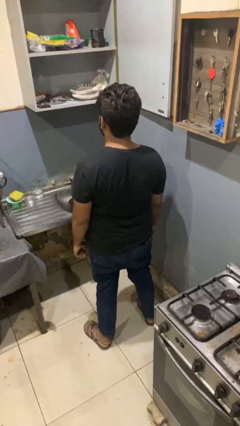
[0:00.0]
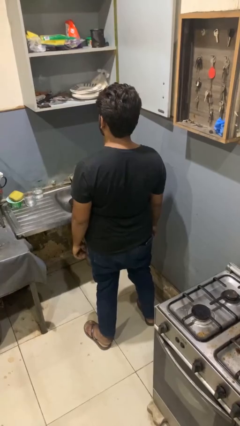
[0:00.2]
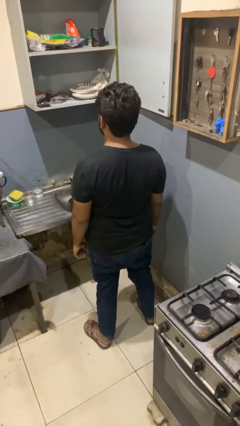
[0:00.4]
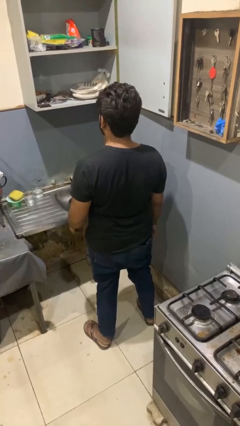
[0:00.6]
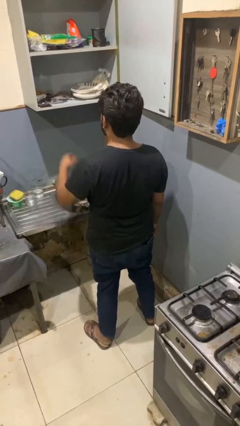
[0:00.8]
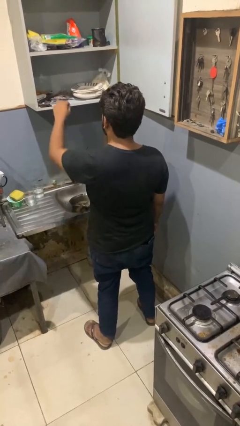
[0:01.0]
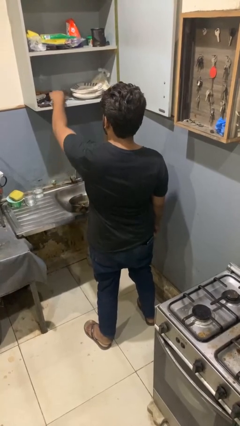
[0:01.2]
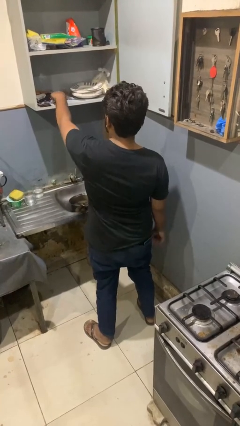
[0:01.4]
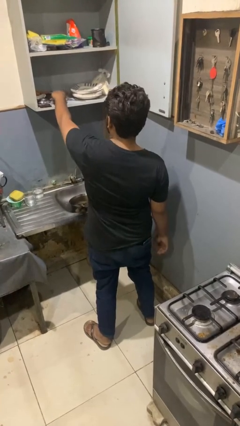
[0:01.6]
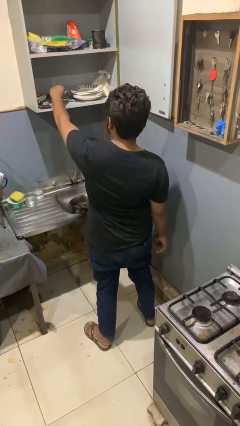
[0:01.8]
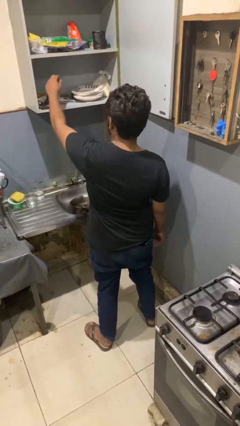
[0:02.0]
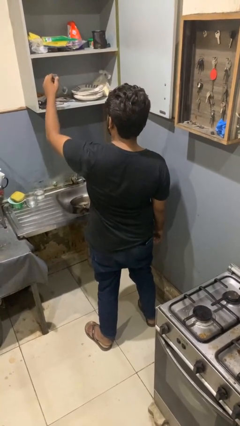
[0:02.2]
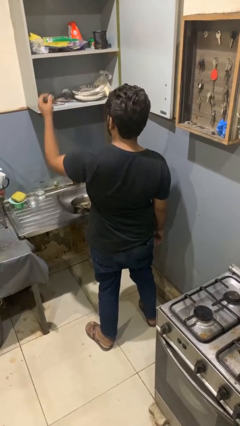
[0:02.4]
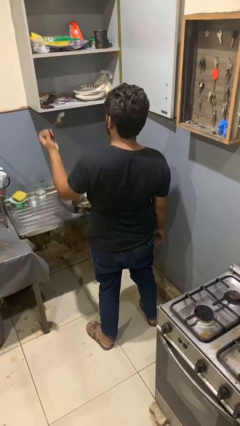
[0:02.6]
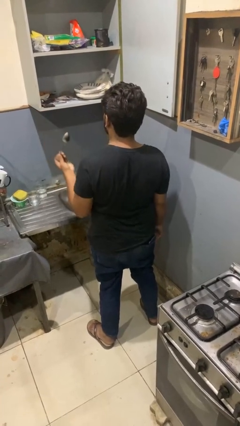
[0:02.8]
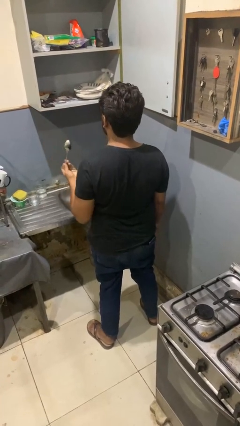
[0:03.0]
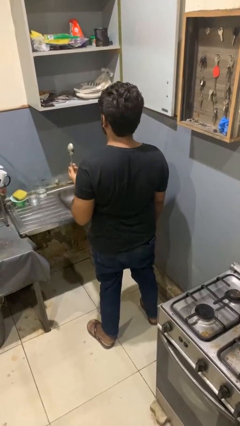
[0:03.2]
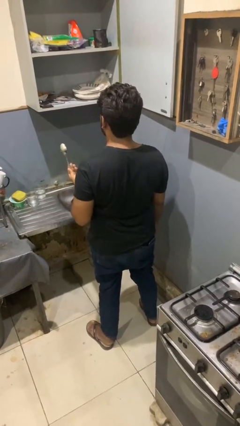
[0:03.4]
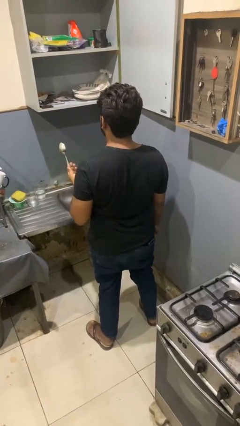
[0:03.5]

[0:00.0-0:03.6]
person takes object from kitchen drawer

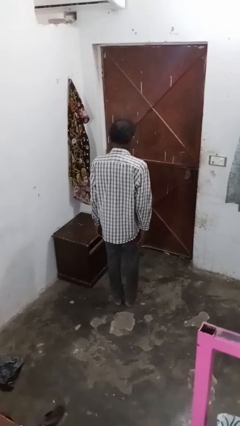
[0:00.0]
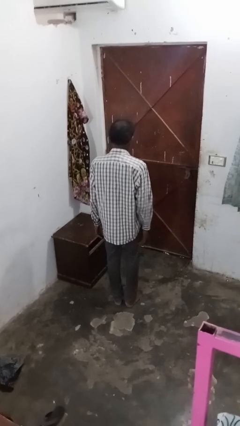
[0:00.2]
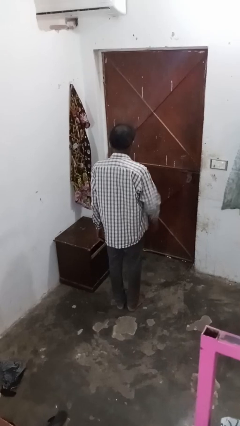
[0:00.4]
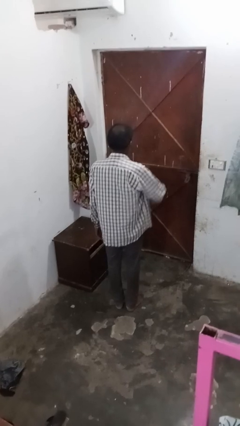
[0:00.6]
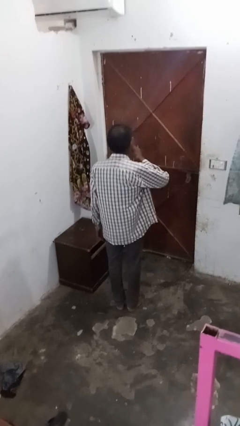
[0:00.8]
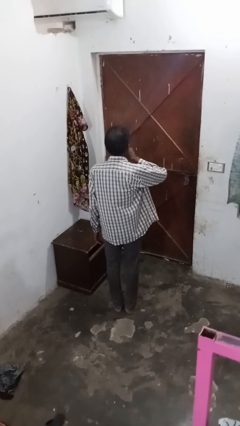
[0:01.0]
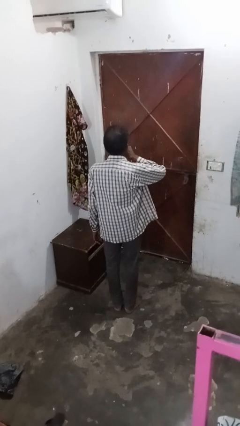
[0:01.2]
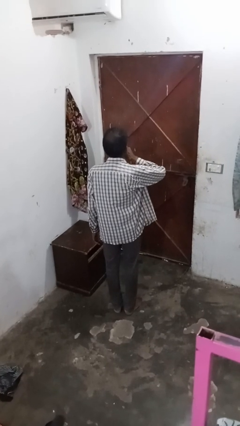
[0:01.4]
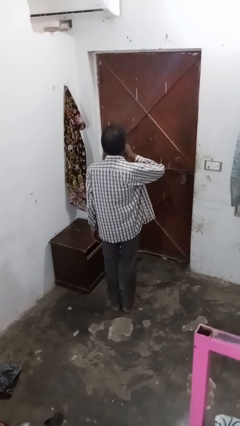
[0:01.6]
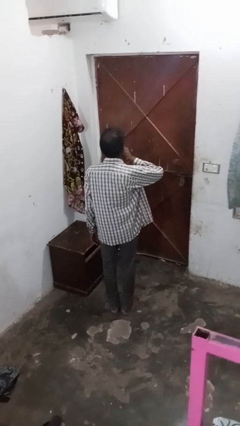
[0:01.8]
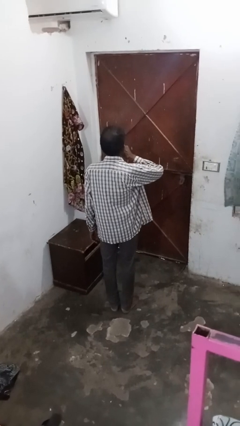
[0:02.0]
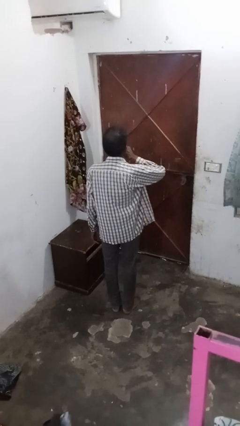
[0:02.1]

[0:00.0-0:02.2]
person gestures be quiet

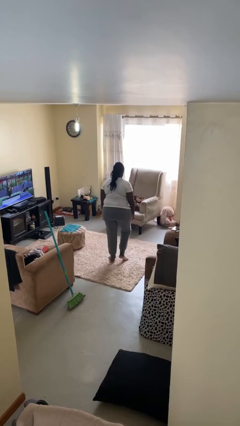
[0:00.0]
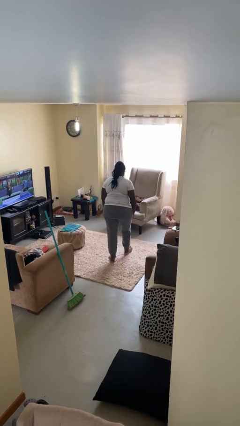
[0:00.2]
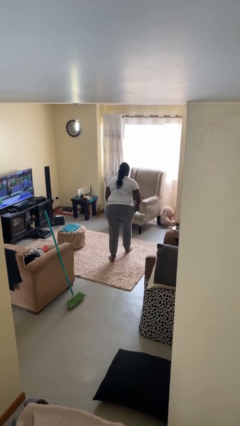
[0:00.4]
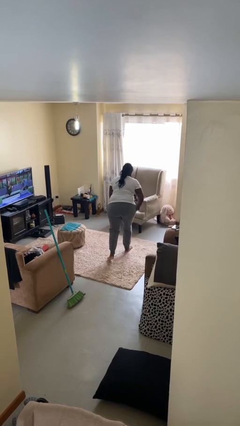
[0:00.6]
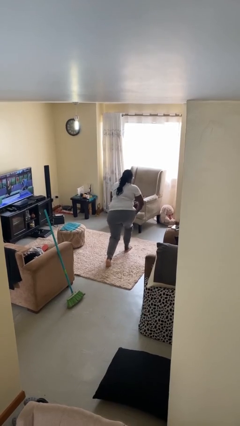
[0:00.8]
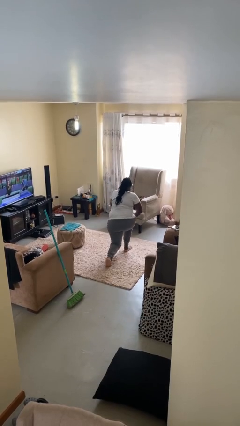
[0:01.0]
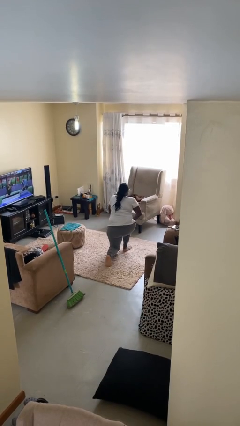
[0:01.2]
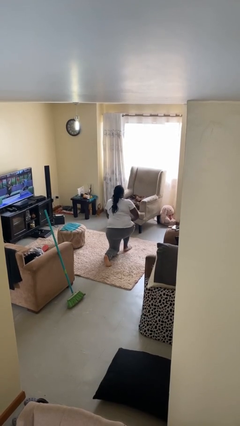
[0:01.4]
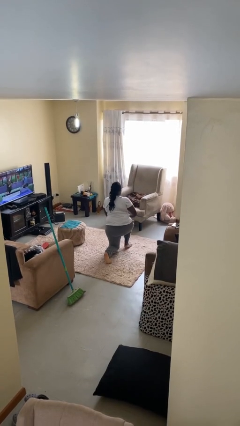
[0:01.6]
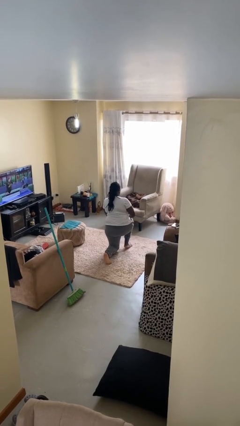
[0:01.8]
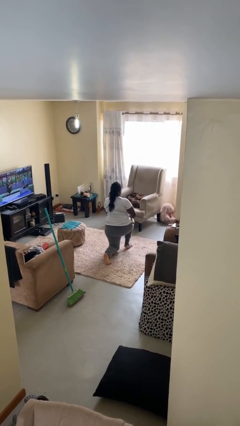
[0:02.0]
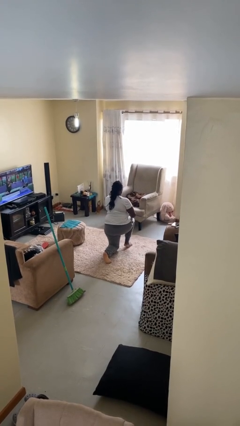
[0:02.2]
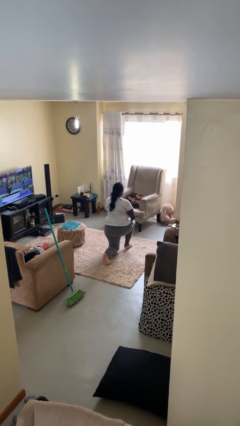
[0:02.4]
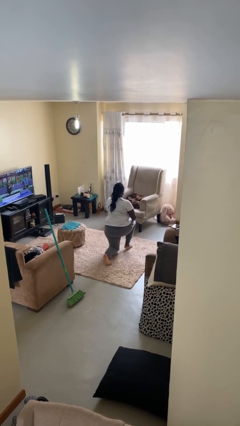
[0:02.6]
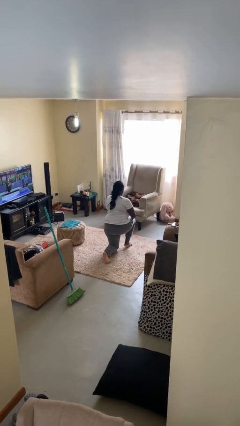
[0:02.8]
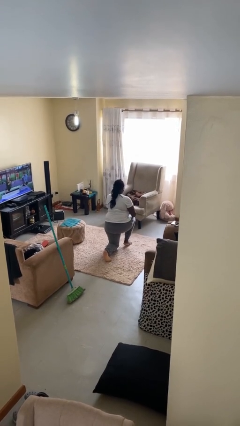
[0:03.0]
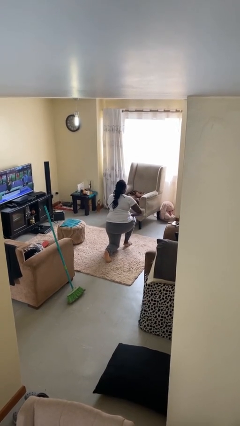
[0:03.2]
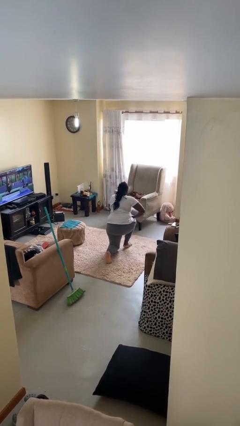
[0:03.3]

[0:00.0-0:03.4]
person kneels

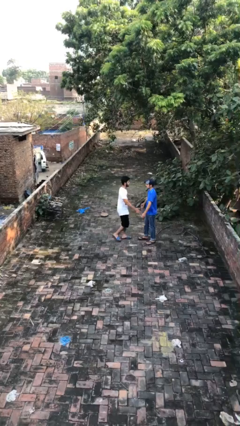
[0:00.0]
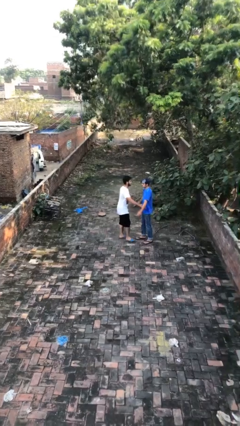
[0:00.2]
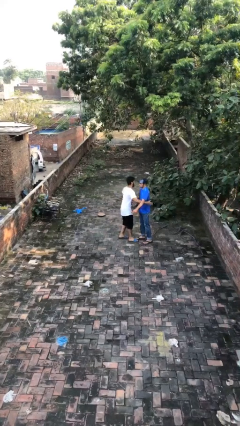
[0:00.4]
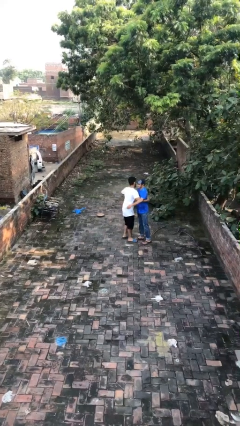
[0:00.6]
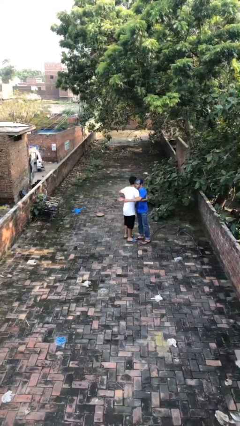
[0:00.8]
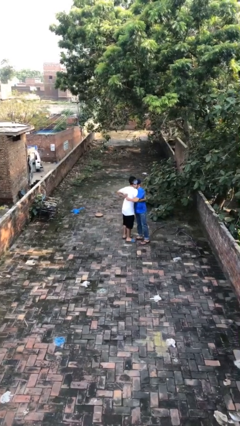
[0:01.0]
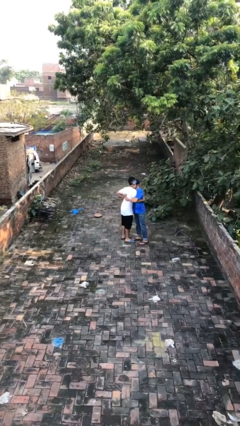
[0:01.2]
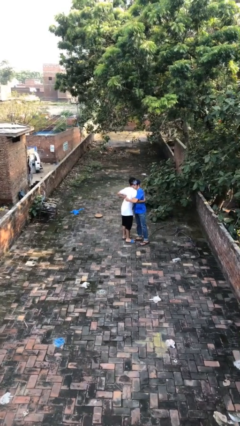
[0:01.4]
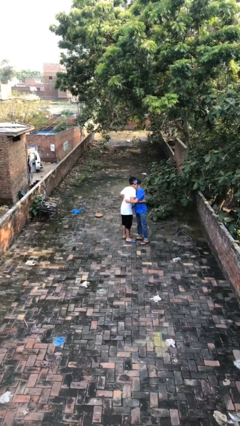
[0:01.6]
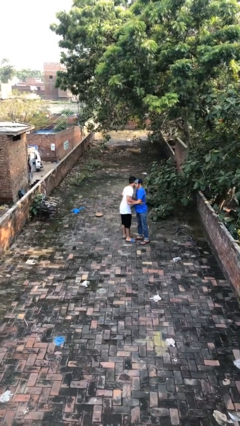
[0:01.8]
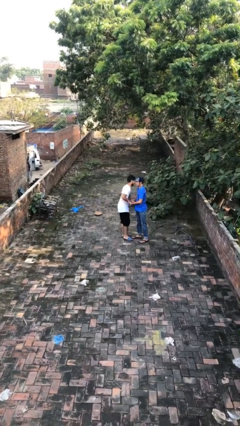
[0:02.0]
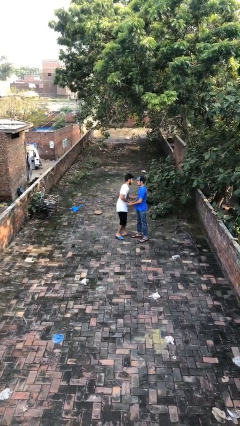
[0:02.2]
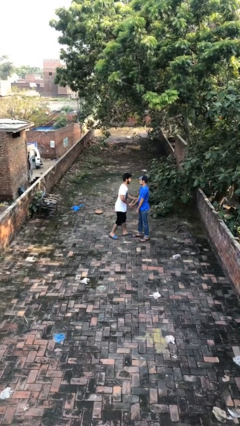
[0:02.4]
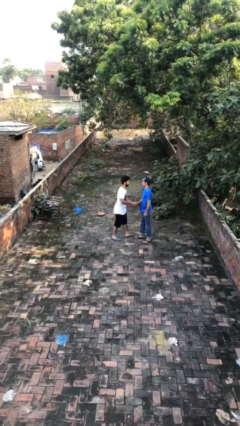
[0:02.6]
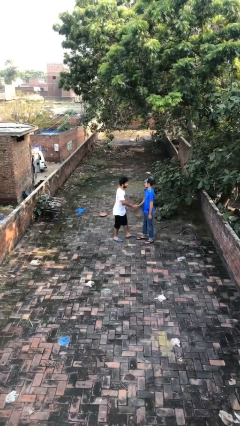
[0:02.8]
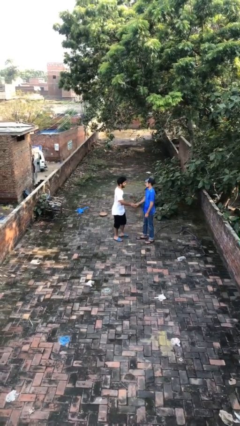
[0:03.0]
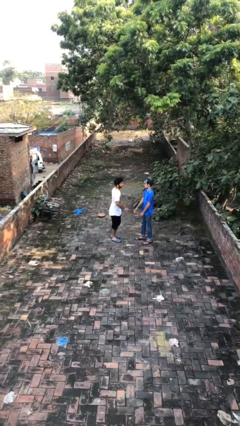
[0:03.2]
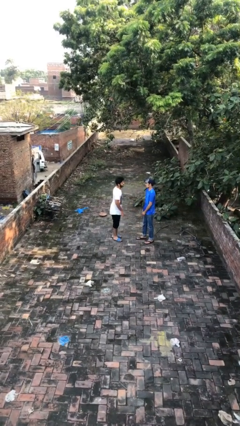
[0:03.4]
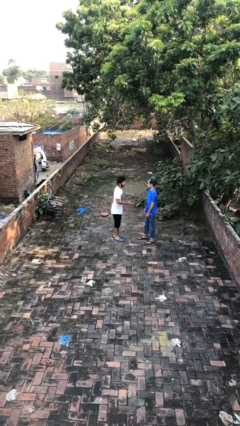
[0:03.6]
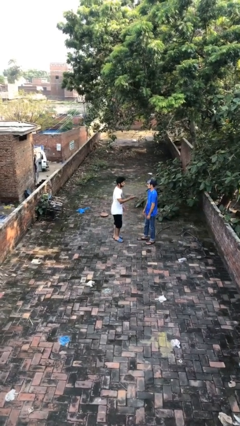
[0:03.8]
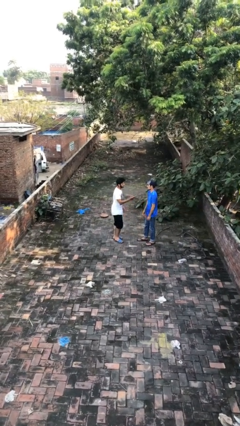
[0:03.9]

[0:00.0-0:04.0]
person embraces person

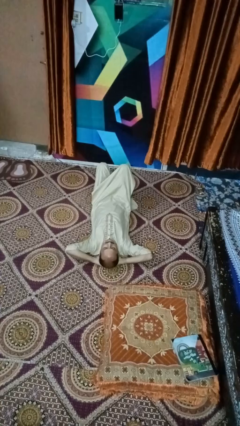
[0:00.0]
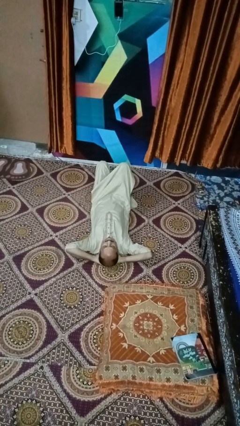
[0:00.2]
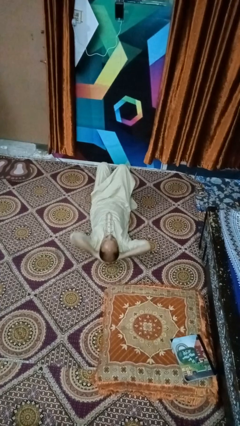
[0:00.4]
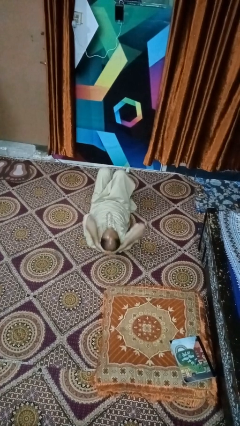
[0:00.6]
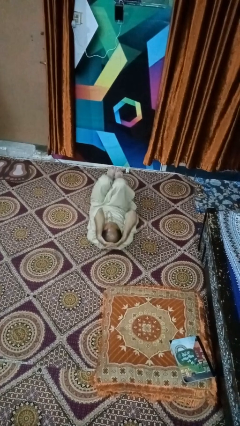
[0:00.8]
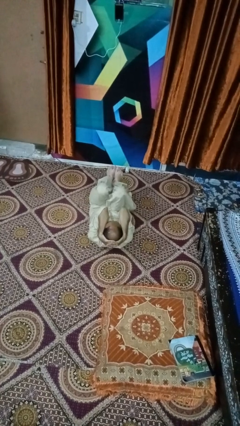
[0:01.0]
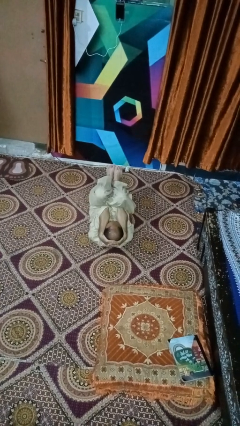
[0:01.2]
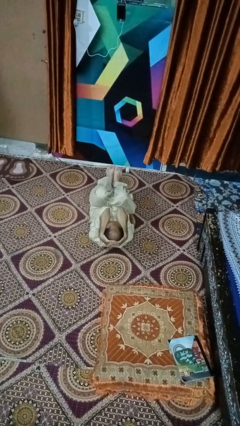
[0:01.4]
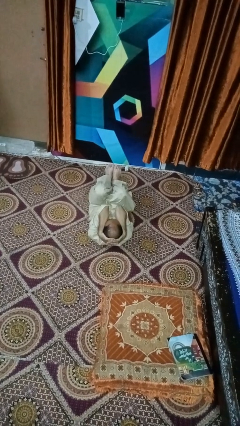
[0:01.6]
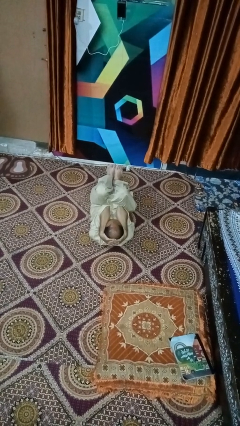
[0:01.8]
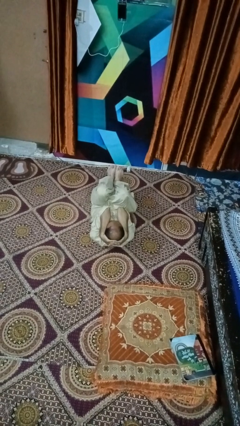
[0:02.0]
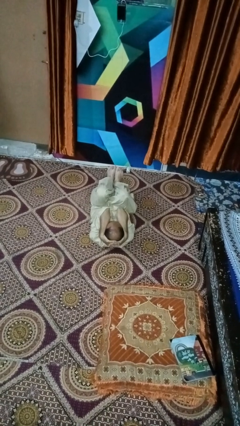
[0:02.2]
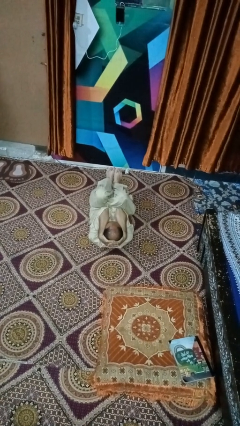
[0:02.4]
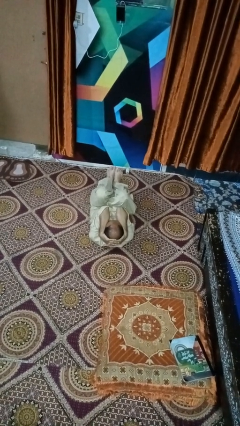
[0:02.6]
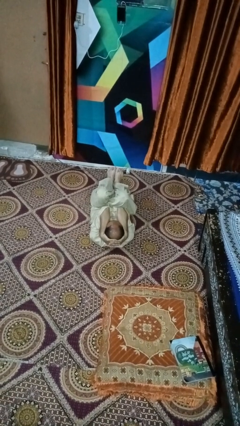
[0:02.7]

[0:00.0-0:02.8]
person exercises with situp

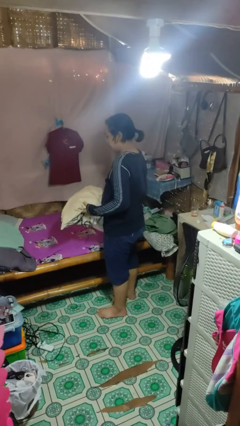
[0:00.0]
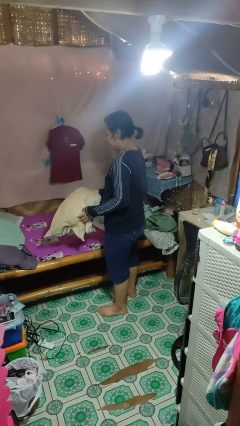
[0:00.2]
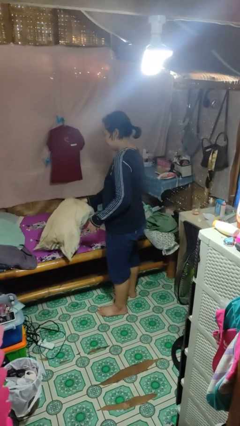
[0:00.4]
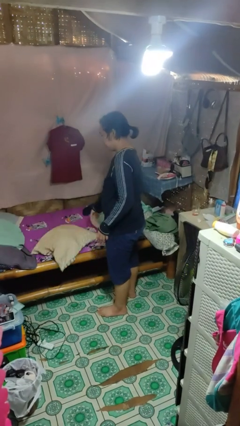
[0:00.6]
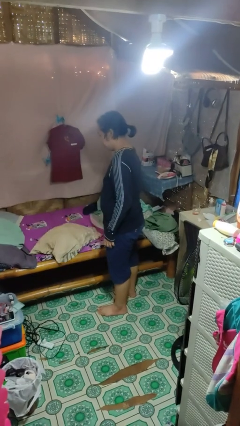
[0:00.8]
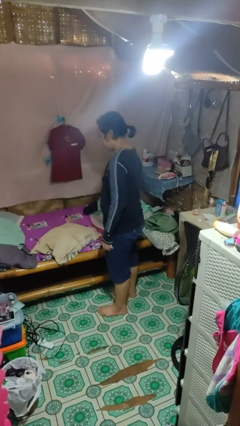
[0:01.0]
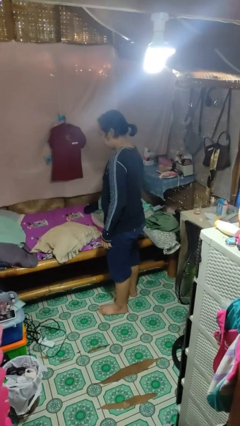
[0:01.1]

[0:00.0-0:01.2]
person puts down object on bed

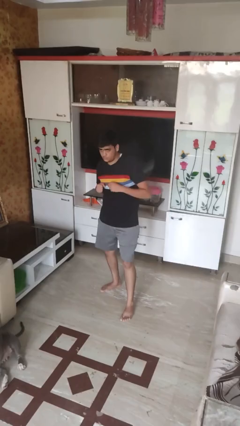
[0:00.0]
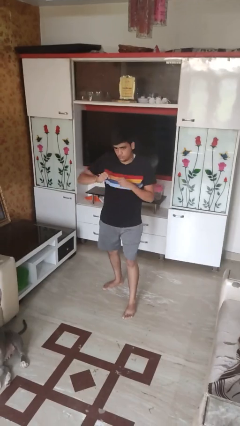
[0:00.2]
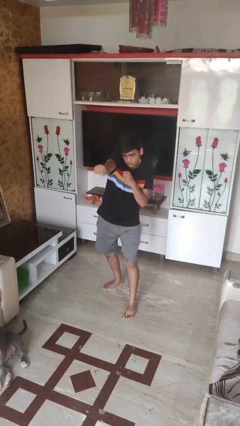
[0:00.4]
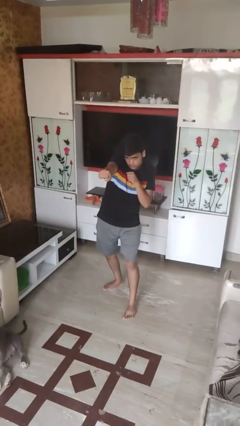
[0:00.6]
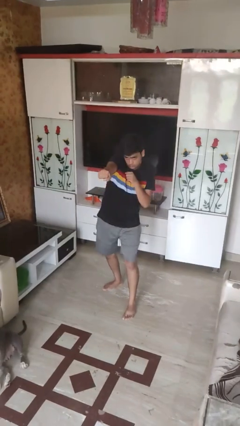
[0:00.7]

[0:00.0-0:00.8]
person punches
